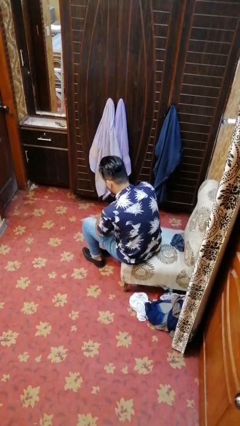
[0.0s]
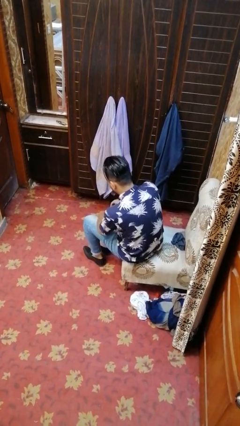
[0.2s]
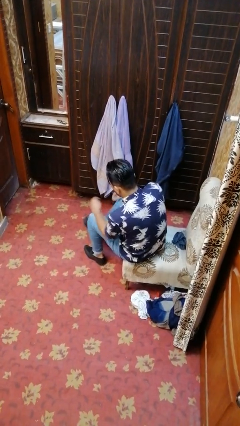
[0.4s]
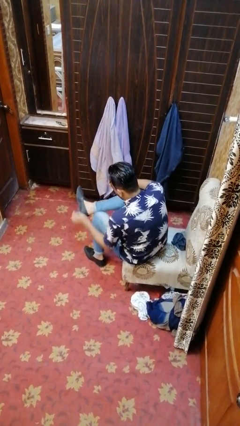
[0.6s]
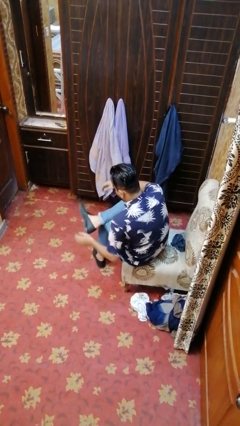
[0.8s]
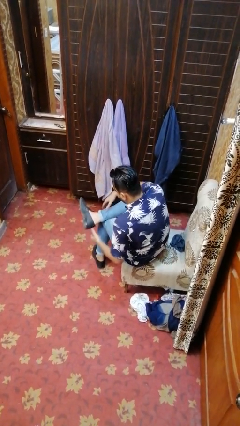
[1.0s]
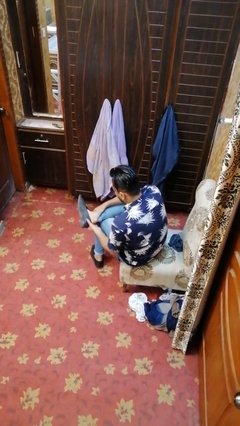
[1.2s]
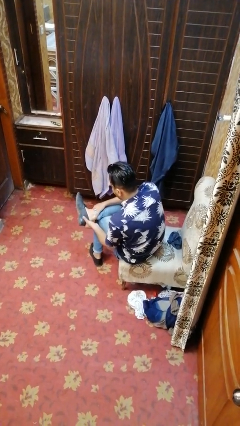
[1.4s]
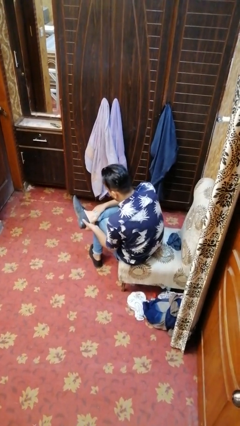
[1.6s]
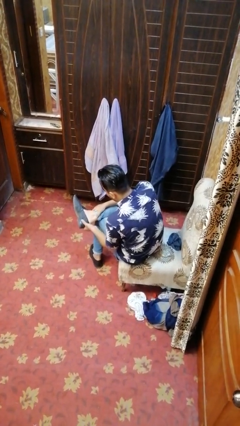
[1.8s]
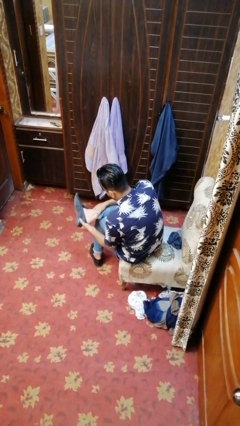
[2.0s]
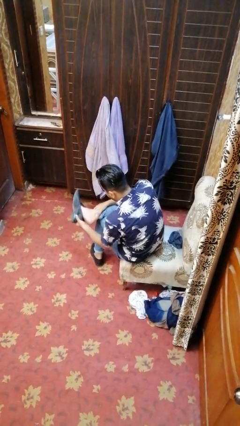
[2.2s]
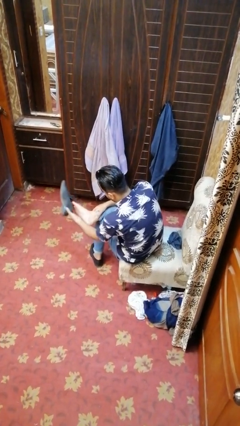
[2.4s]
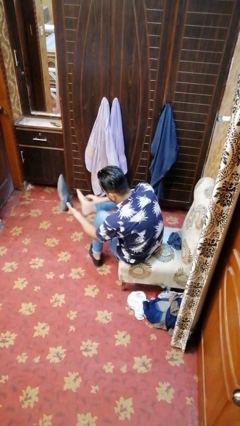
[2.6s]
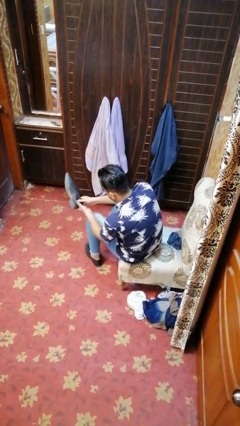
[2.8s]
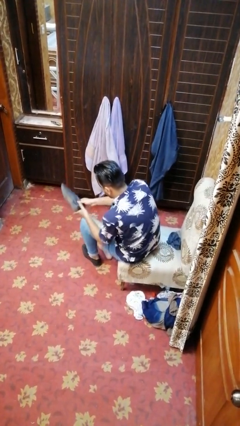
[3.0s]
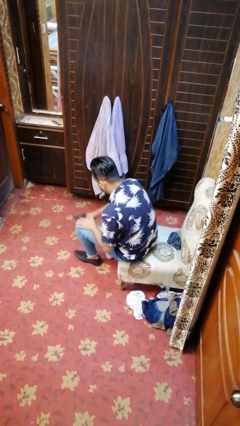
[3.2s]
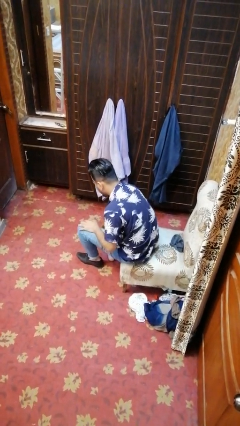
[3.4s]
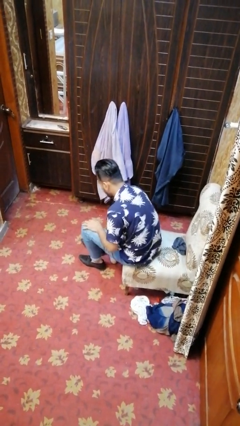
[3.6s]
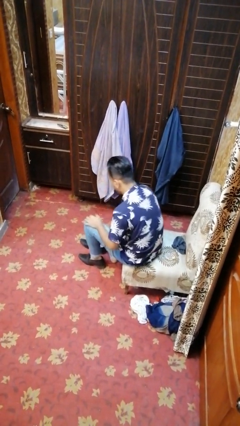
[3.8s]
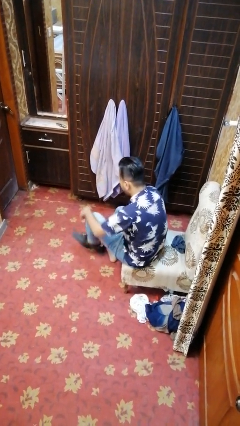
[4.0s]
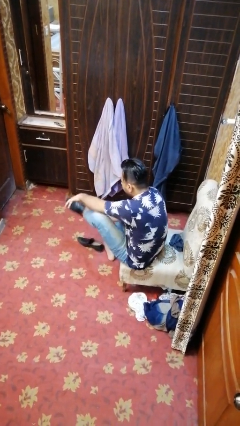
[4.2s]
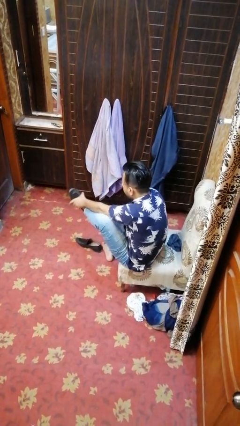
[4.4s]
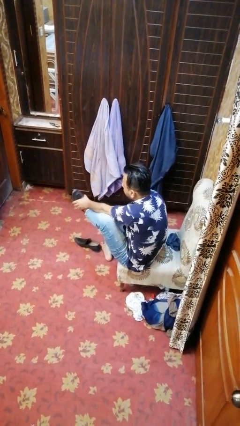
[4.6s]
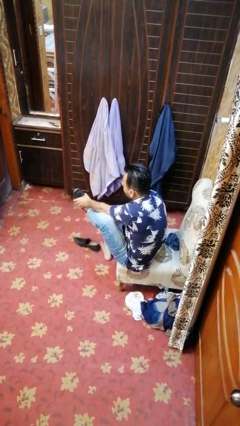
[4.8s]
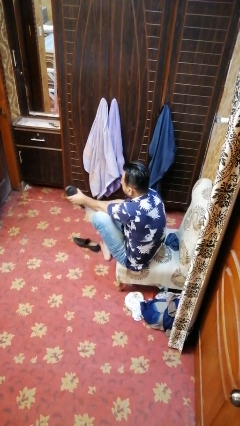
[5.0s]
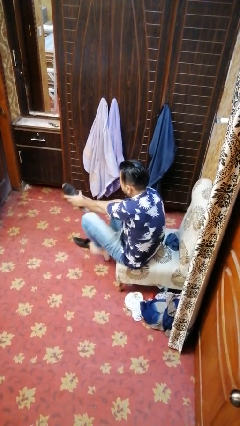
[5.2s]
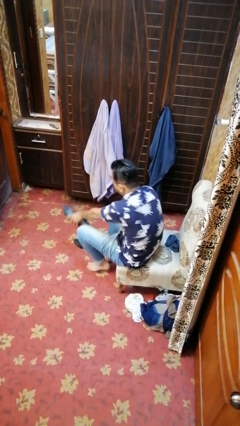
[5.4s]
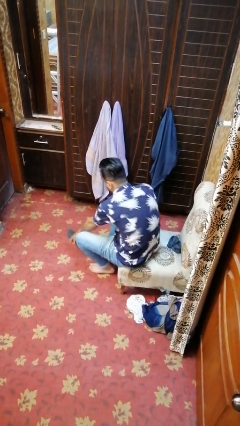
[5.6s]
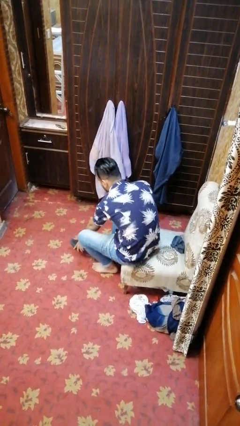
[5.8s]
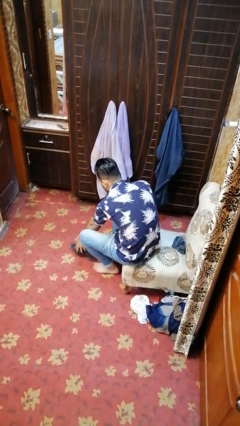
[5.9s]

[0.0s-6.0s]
person takes off shoes

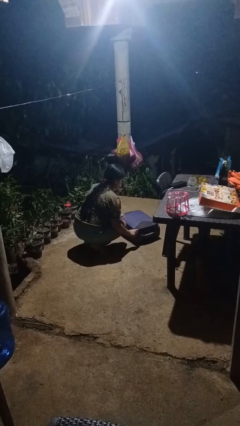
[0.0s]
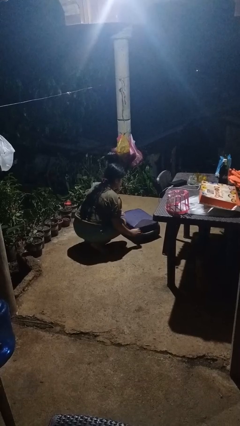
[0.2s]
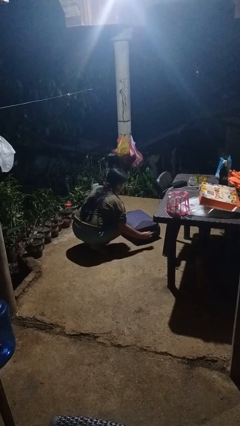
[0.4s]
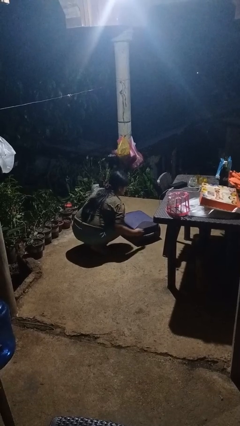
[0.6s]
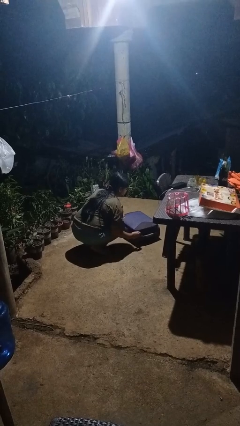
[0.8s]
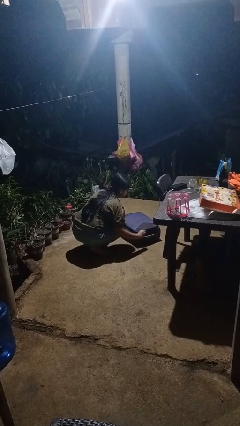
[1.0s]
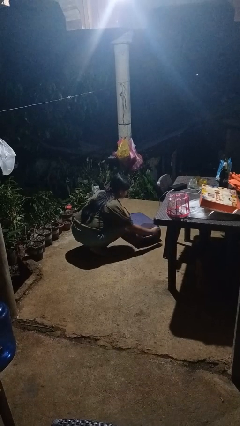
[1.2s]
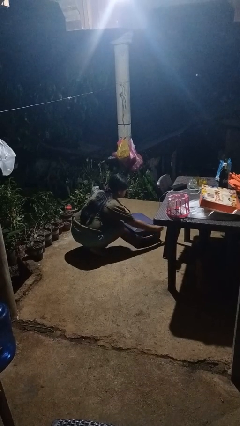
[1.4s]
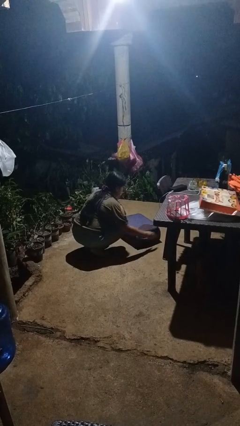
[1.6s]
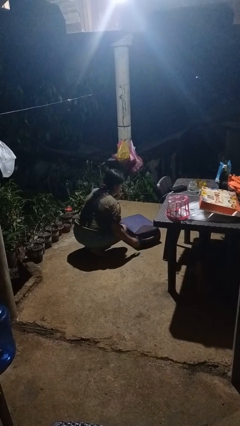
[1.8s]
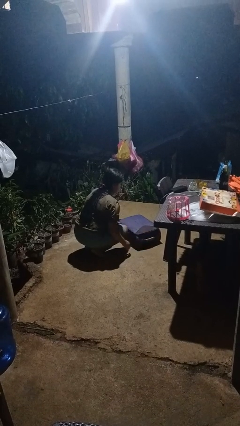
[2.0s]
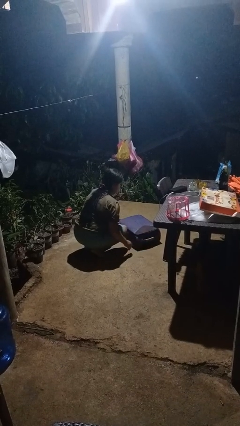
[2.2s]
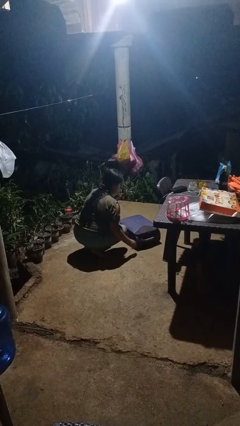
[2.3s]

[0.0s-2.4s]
person opens suitcase

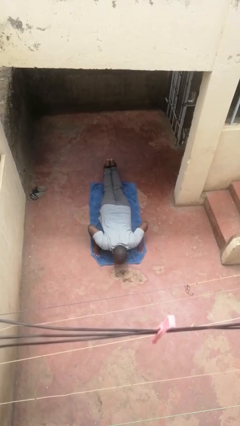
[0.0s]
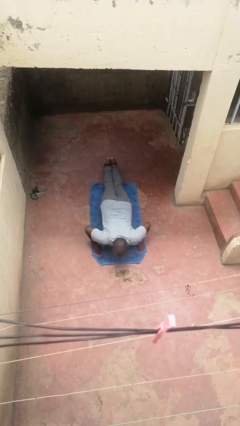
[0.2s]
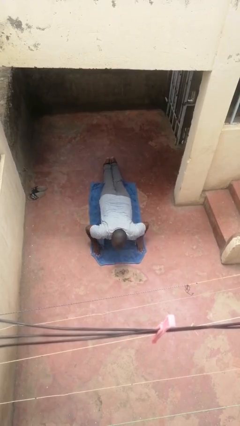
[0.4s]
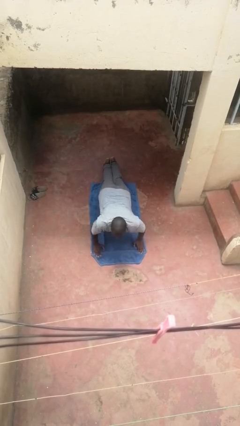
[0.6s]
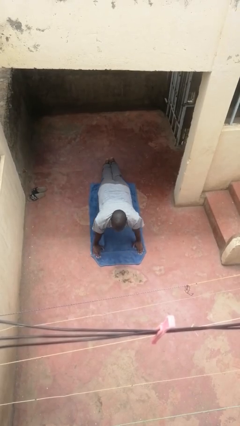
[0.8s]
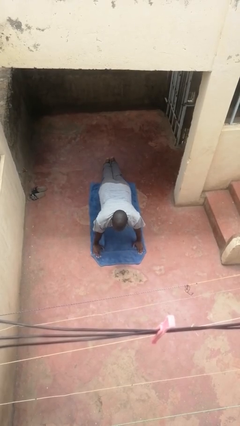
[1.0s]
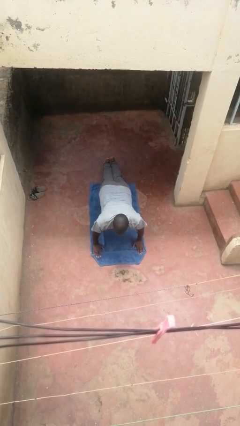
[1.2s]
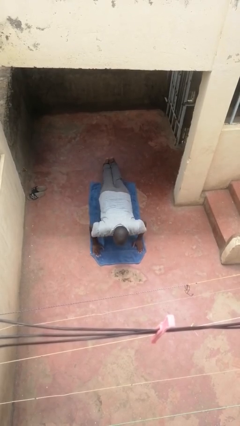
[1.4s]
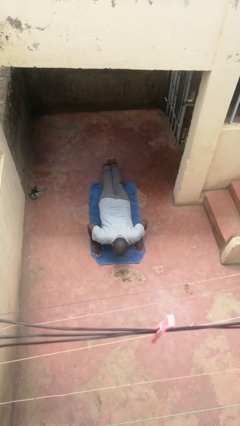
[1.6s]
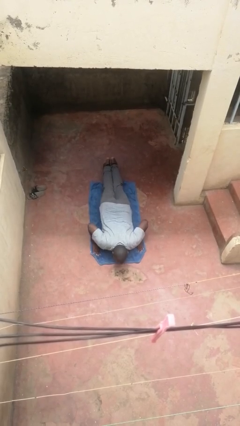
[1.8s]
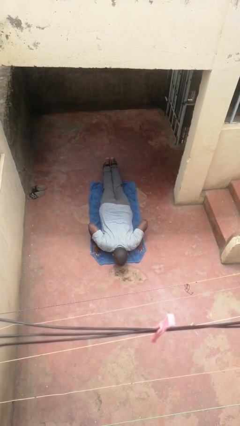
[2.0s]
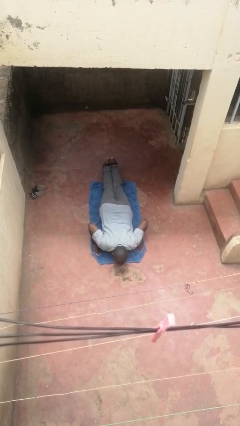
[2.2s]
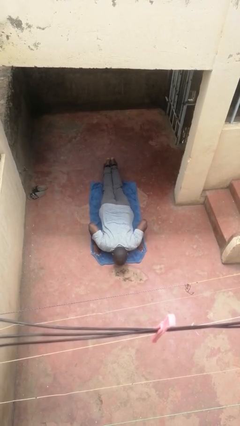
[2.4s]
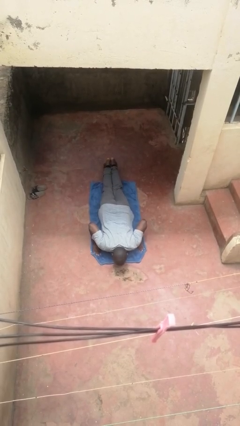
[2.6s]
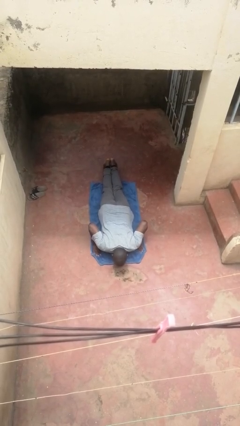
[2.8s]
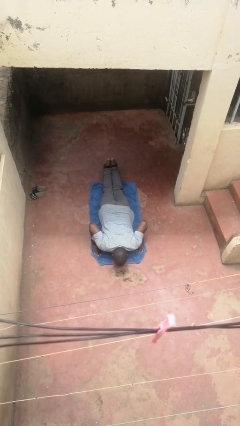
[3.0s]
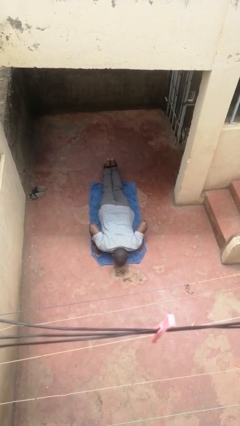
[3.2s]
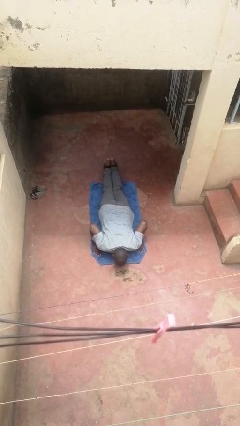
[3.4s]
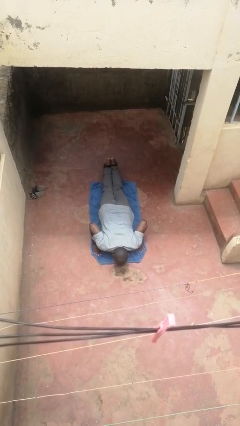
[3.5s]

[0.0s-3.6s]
person exercises with pushup

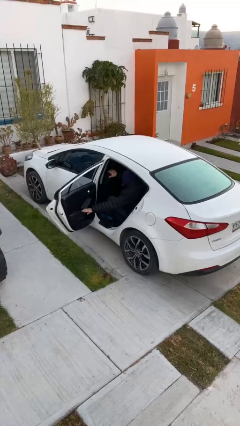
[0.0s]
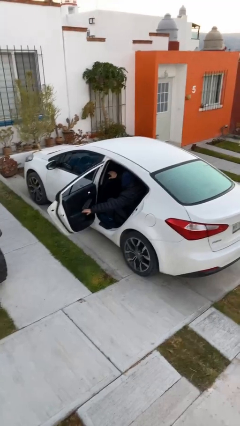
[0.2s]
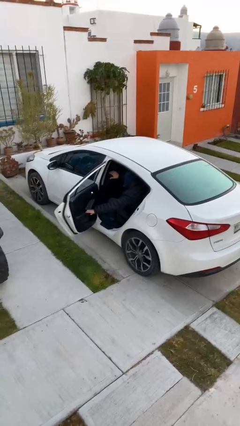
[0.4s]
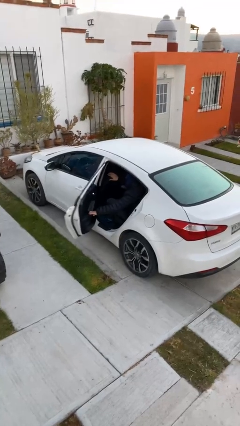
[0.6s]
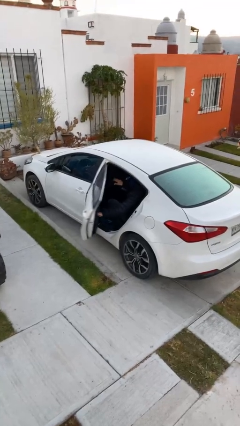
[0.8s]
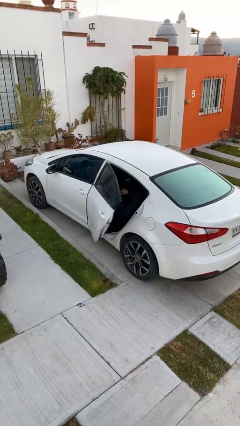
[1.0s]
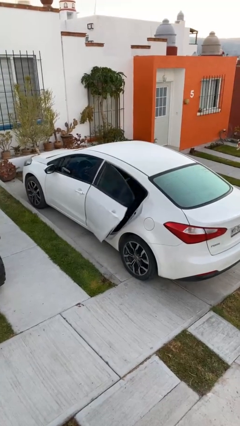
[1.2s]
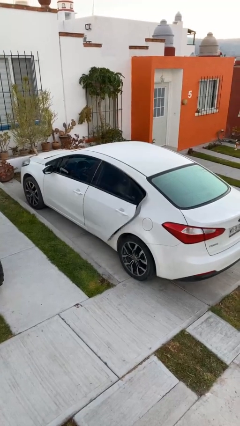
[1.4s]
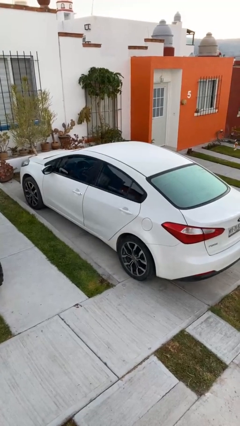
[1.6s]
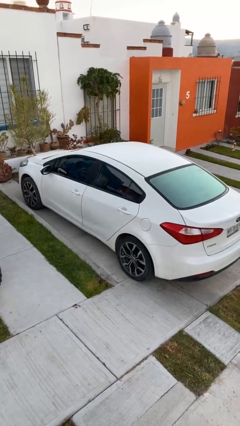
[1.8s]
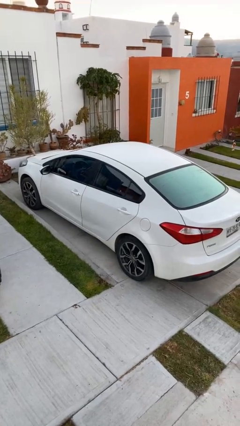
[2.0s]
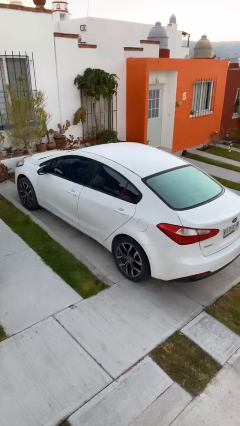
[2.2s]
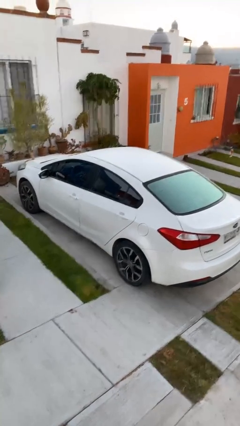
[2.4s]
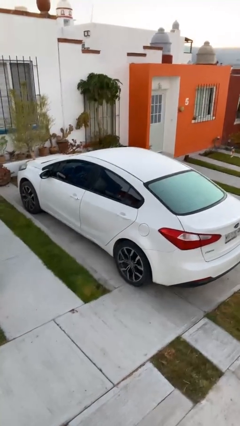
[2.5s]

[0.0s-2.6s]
person closes car door

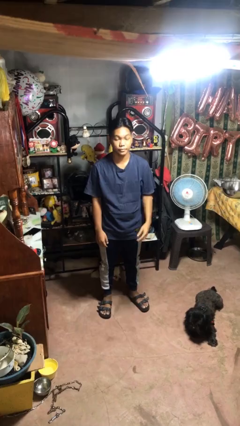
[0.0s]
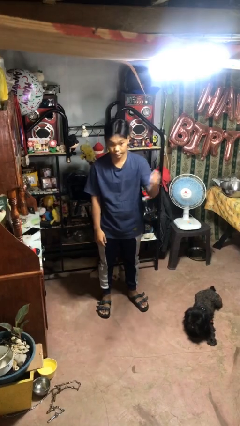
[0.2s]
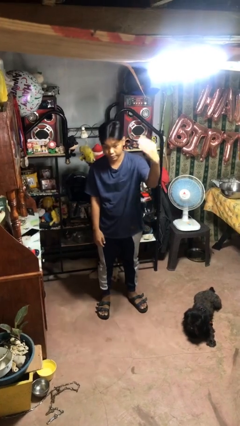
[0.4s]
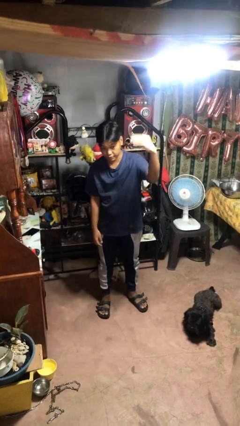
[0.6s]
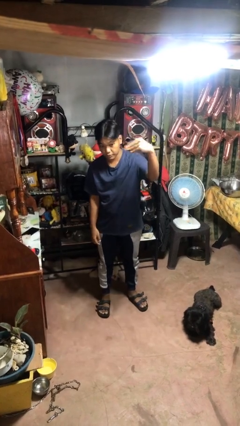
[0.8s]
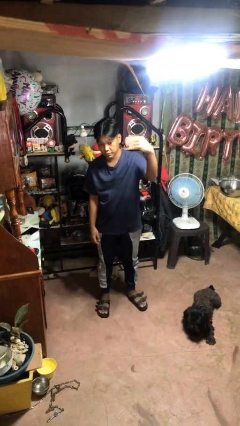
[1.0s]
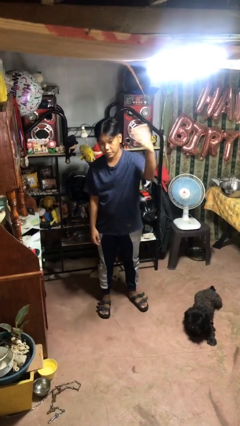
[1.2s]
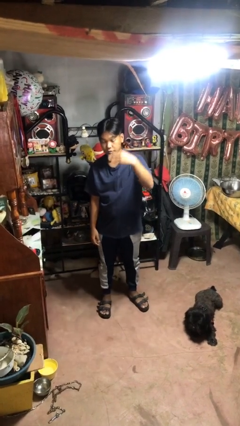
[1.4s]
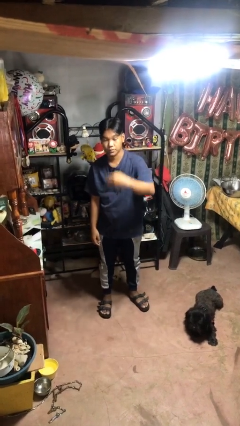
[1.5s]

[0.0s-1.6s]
person gestures come here

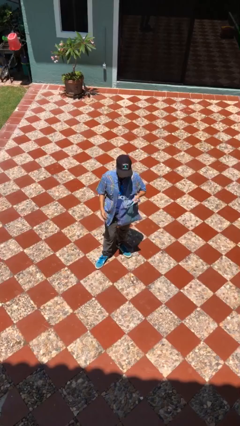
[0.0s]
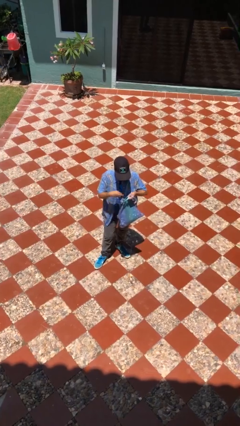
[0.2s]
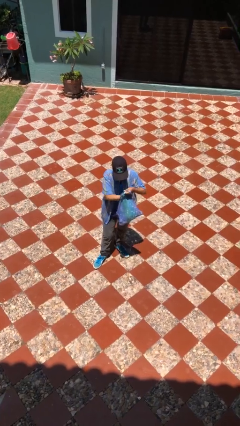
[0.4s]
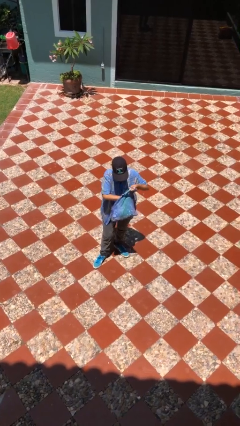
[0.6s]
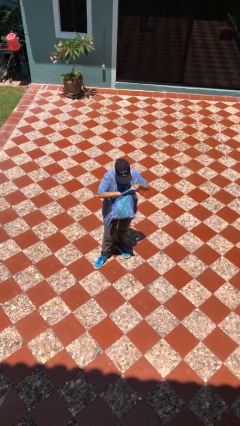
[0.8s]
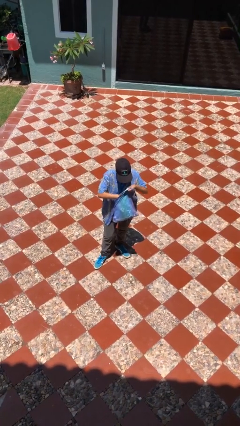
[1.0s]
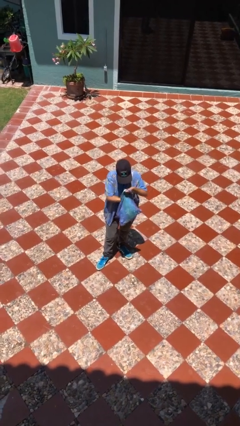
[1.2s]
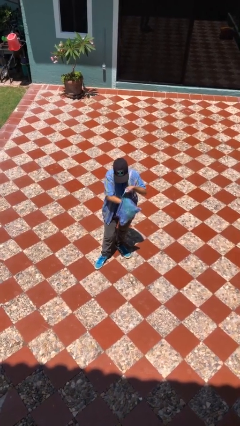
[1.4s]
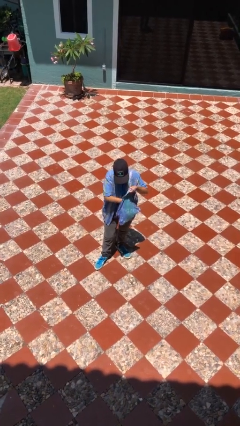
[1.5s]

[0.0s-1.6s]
person searches in purse
